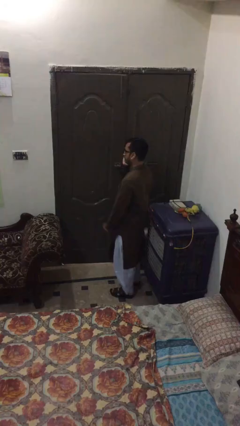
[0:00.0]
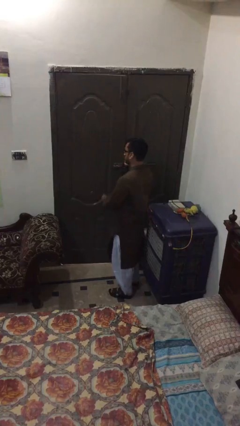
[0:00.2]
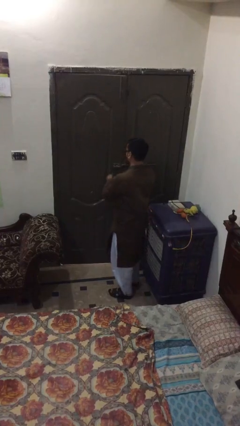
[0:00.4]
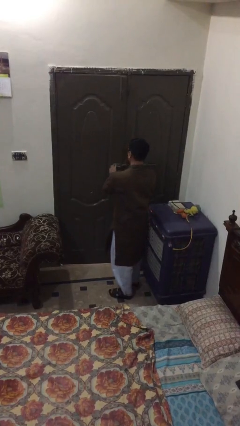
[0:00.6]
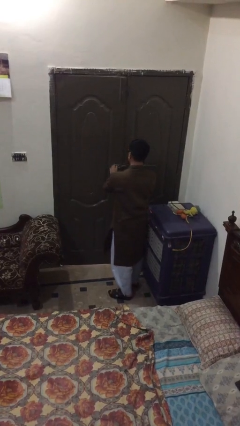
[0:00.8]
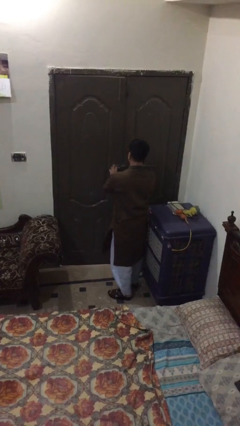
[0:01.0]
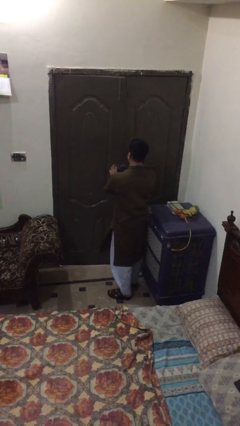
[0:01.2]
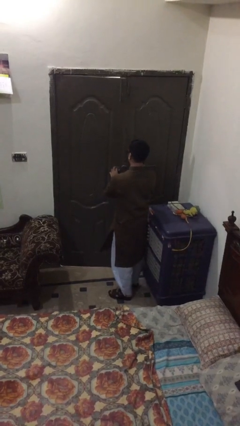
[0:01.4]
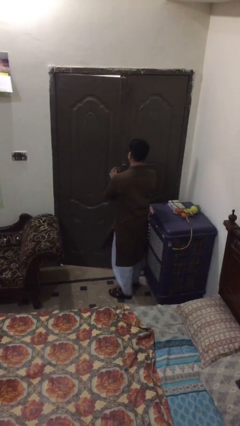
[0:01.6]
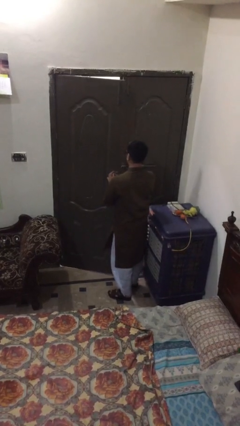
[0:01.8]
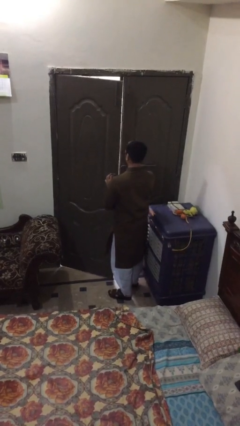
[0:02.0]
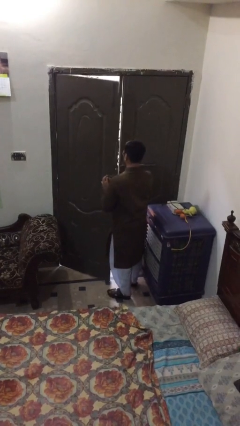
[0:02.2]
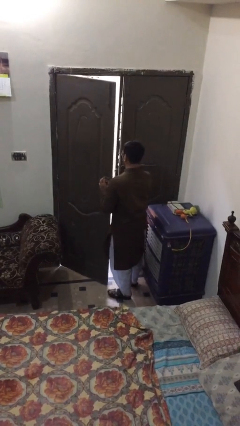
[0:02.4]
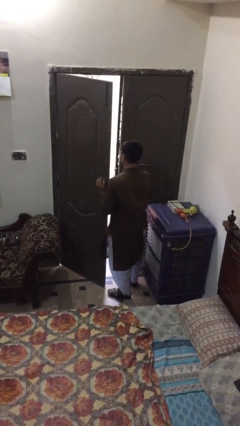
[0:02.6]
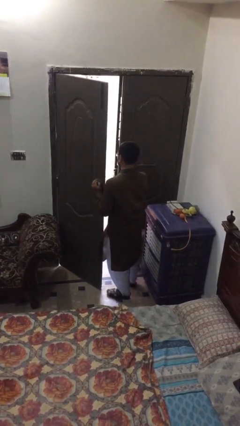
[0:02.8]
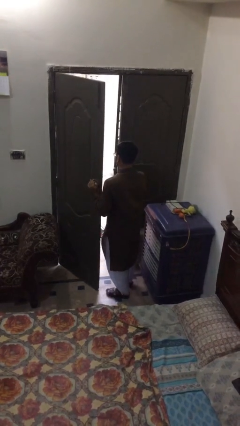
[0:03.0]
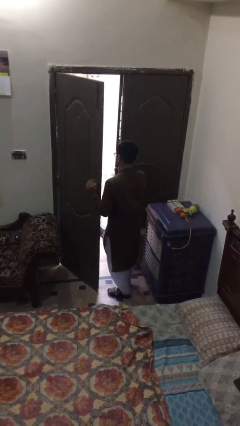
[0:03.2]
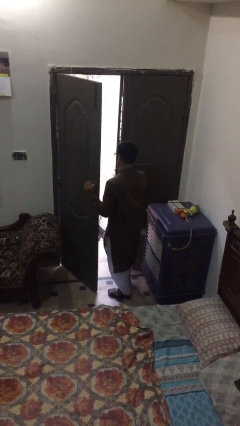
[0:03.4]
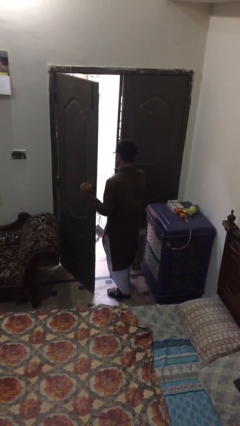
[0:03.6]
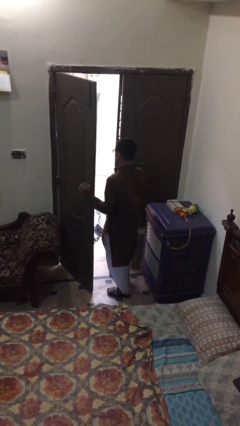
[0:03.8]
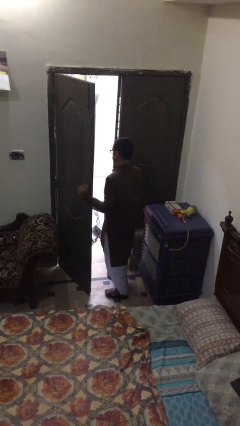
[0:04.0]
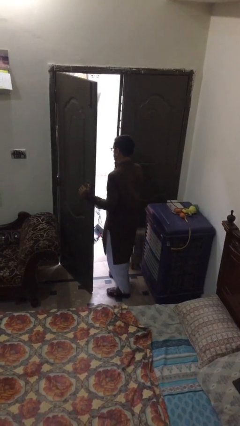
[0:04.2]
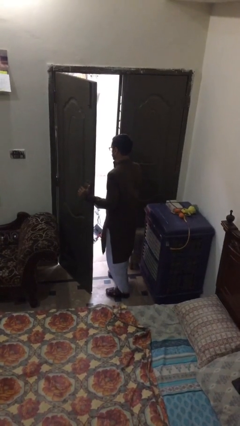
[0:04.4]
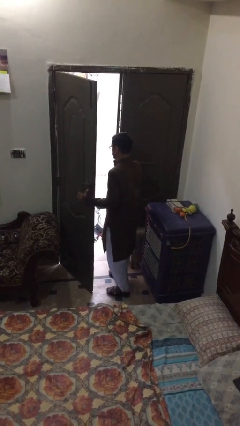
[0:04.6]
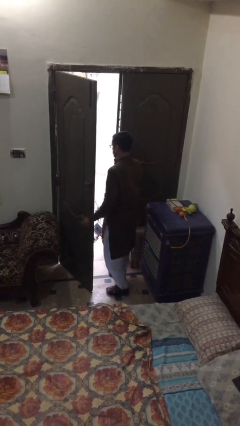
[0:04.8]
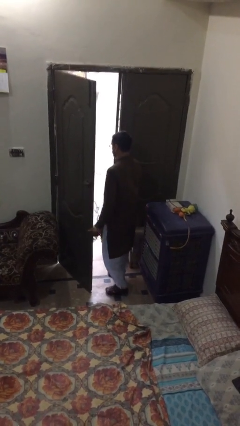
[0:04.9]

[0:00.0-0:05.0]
person opens facility door

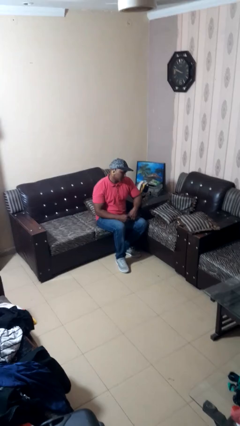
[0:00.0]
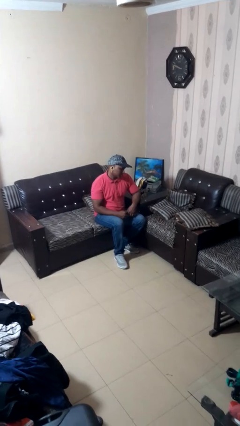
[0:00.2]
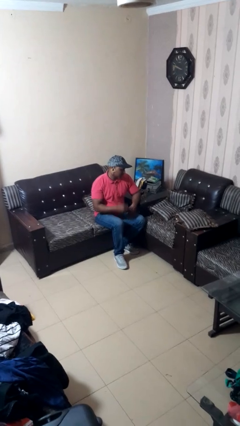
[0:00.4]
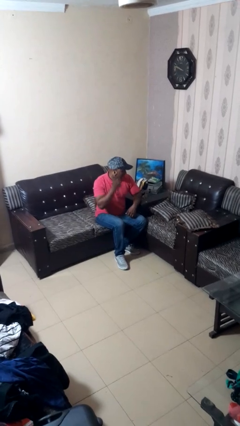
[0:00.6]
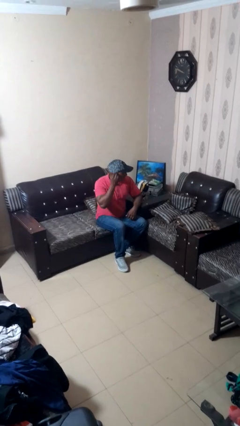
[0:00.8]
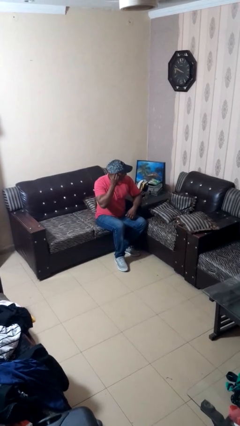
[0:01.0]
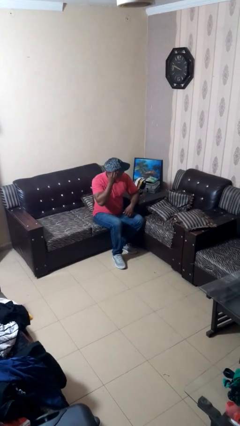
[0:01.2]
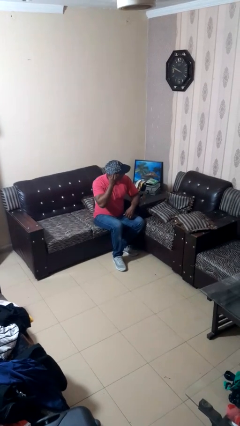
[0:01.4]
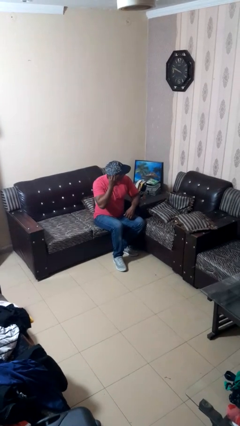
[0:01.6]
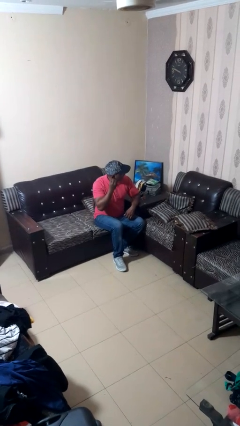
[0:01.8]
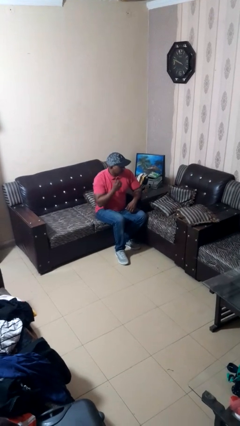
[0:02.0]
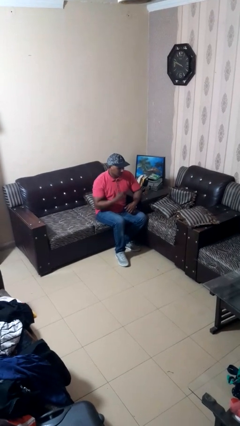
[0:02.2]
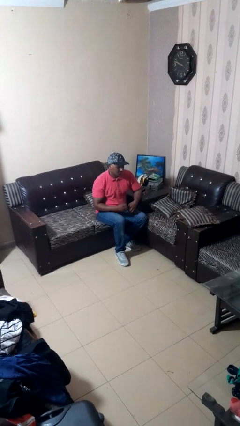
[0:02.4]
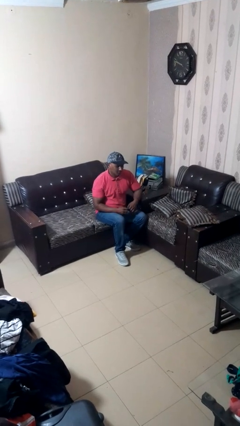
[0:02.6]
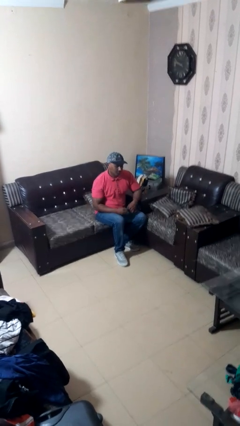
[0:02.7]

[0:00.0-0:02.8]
person takes off earrings

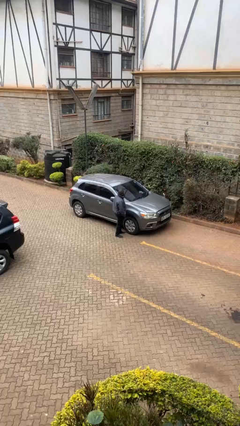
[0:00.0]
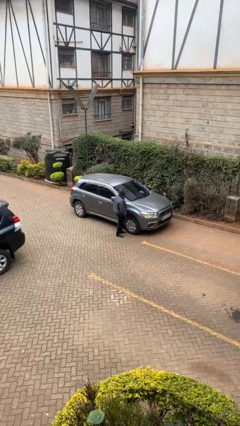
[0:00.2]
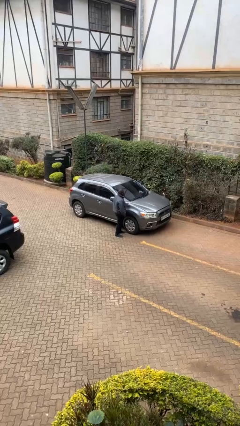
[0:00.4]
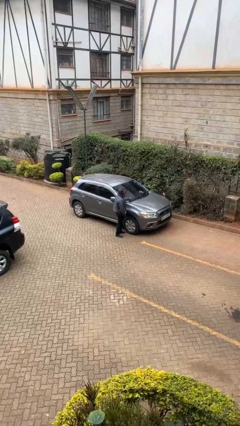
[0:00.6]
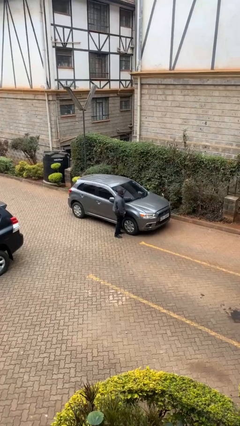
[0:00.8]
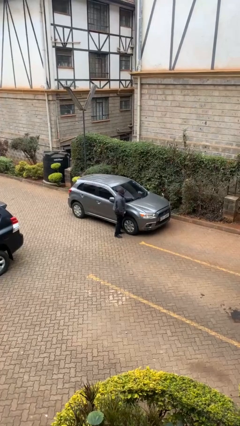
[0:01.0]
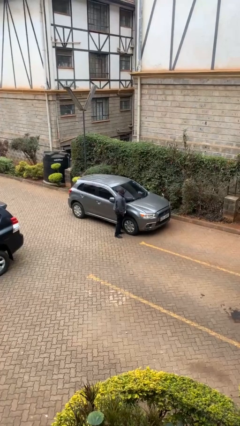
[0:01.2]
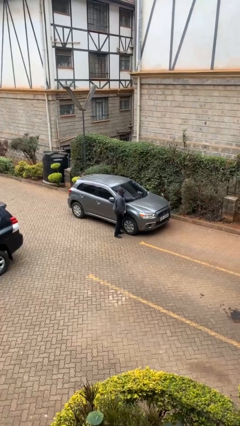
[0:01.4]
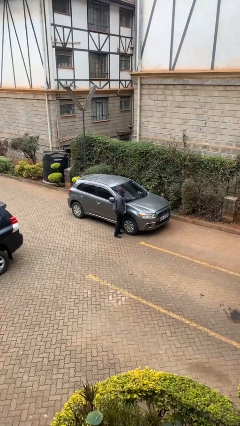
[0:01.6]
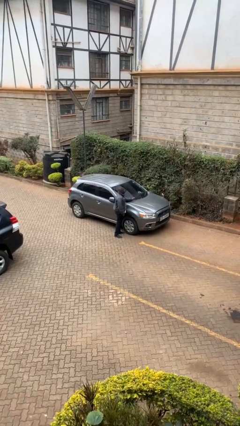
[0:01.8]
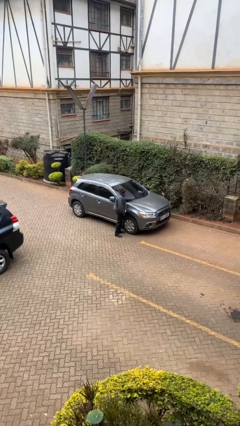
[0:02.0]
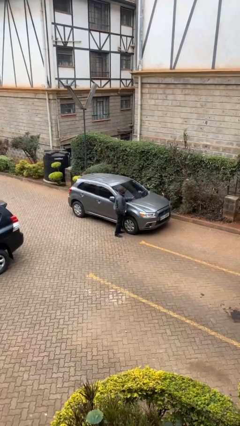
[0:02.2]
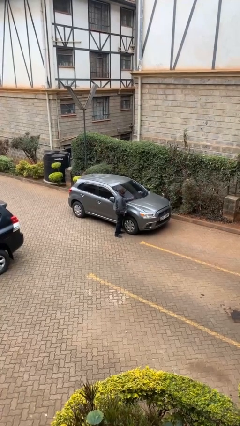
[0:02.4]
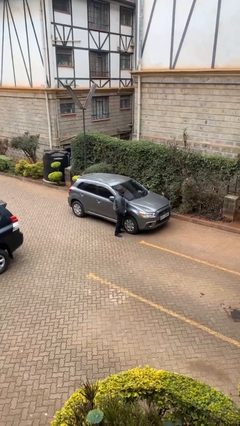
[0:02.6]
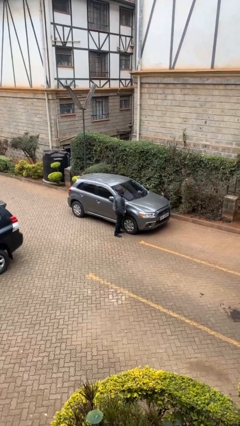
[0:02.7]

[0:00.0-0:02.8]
person flips up car wipers

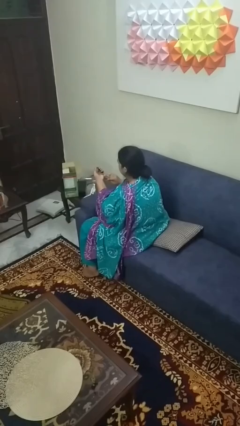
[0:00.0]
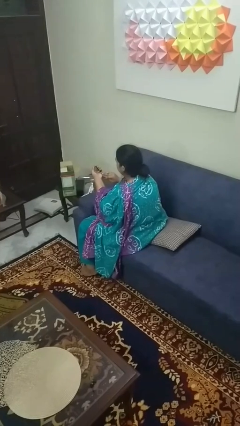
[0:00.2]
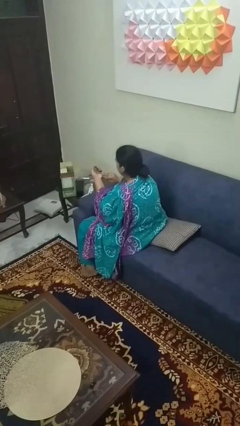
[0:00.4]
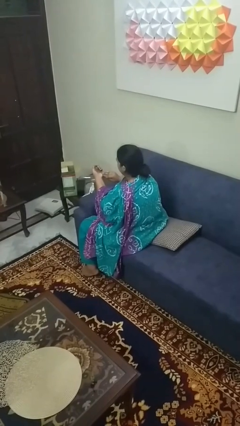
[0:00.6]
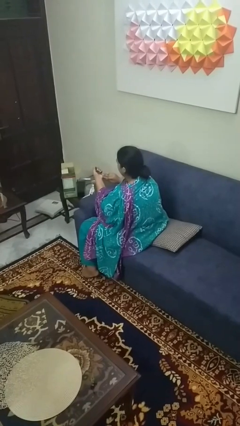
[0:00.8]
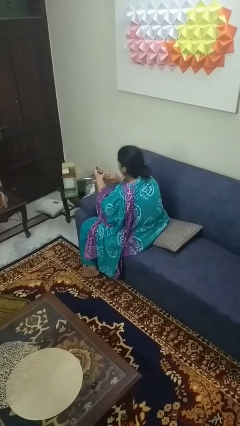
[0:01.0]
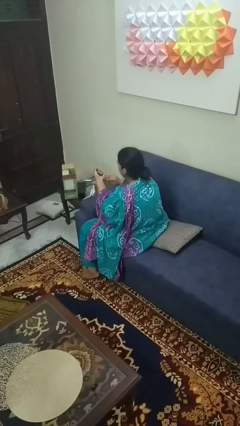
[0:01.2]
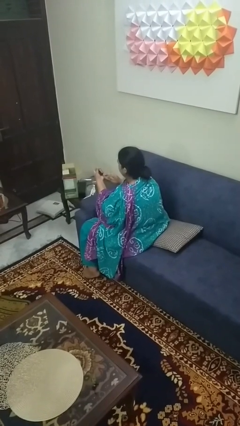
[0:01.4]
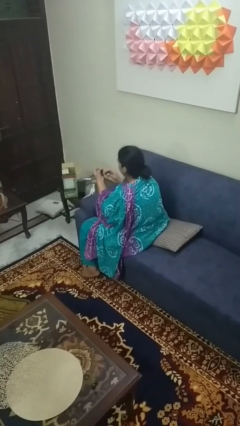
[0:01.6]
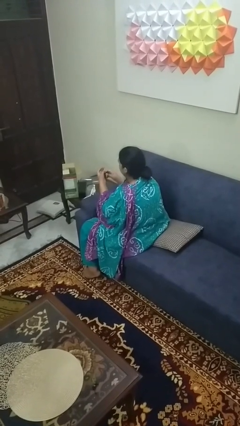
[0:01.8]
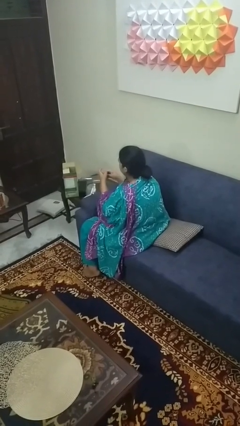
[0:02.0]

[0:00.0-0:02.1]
person clips fingernails

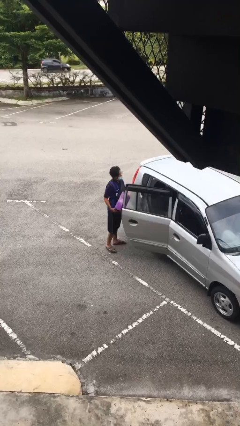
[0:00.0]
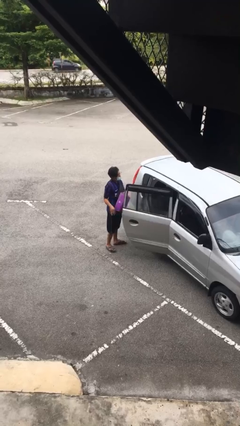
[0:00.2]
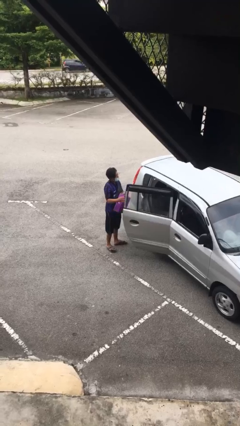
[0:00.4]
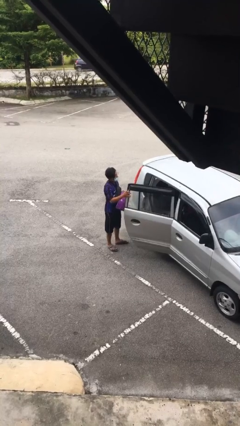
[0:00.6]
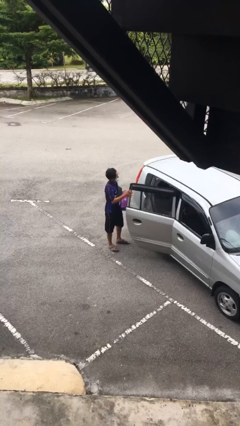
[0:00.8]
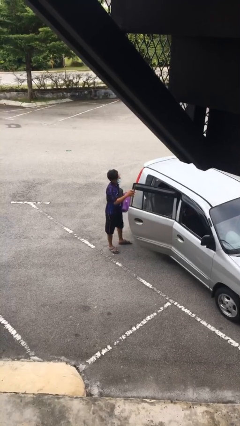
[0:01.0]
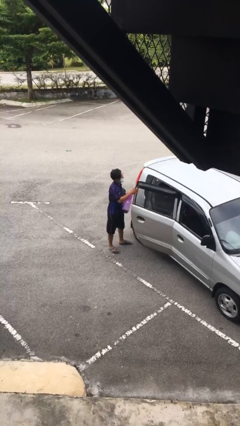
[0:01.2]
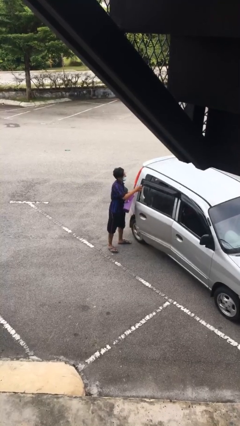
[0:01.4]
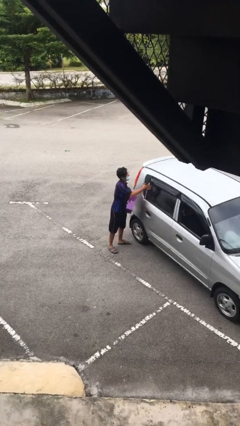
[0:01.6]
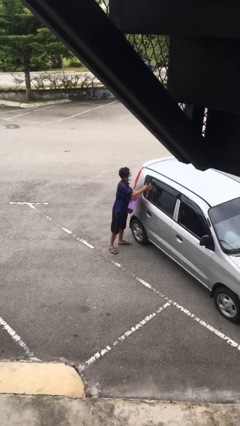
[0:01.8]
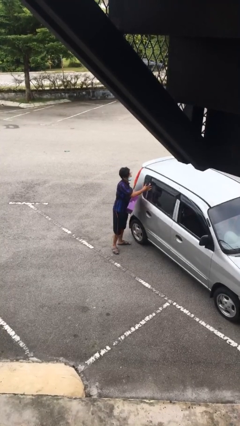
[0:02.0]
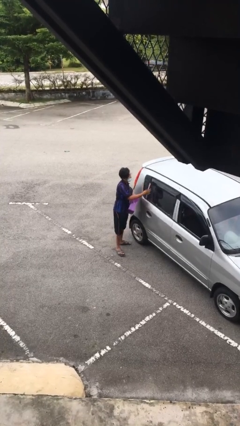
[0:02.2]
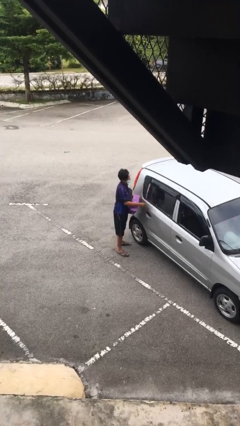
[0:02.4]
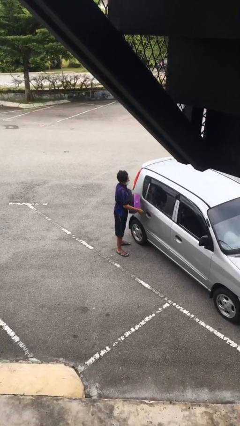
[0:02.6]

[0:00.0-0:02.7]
person closes car door

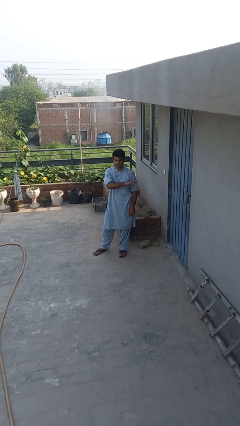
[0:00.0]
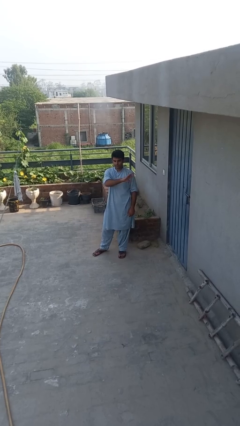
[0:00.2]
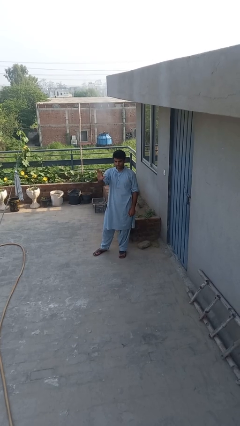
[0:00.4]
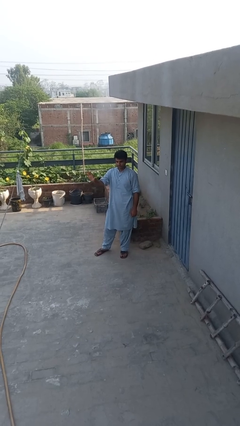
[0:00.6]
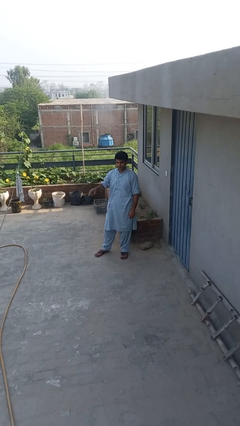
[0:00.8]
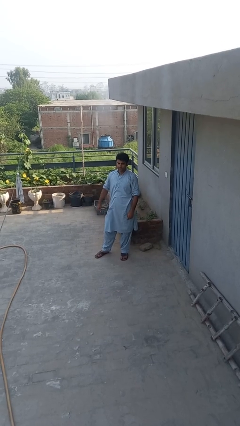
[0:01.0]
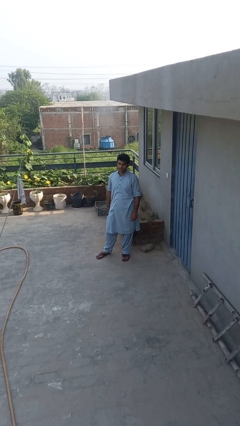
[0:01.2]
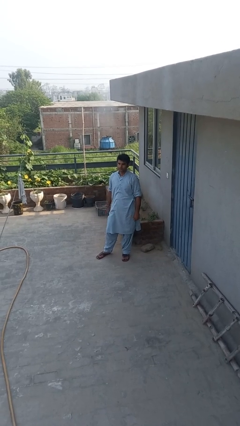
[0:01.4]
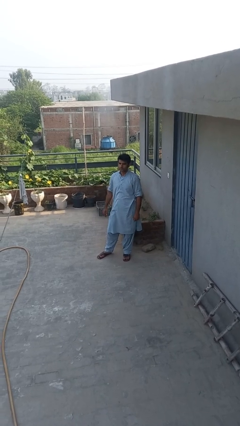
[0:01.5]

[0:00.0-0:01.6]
person gestures swipe right

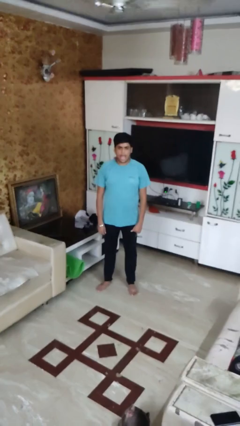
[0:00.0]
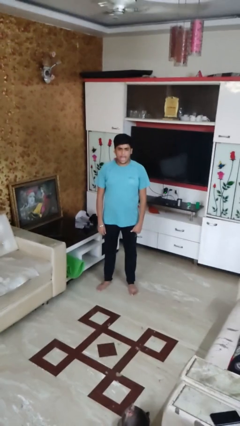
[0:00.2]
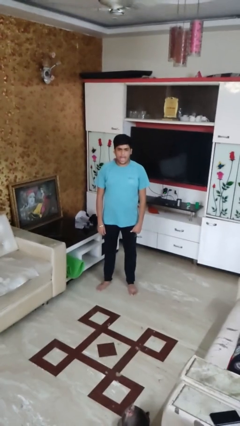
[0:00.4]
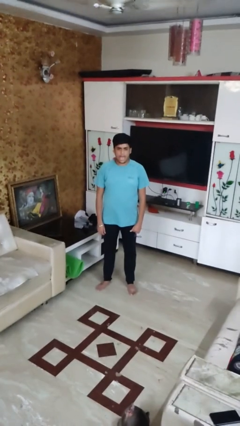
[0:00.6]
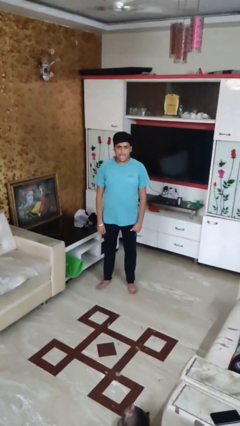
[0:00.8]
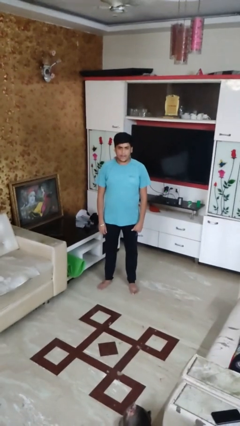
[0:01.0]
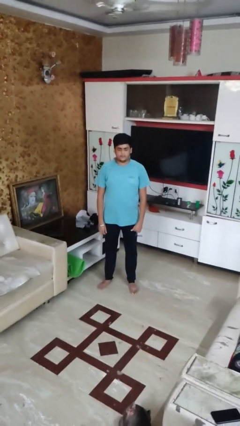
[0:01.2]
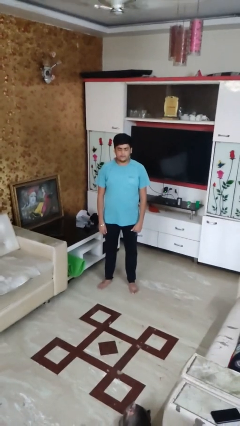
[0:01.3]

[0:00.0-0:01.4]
person sticks out tongue
